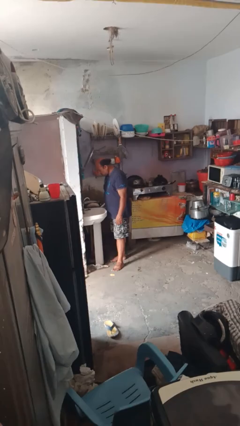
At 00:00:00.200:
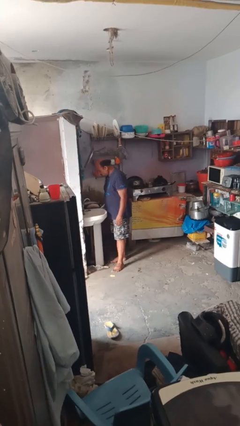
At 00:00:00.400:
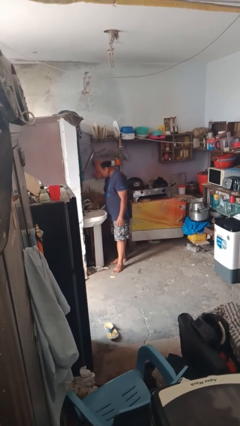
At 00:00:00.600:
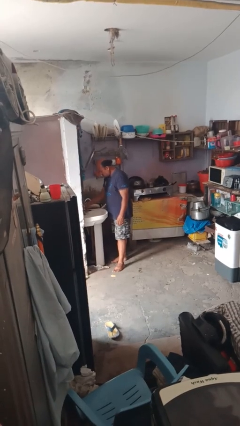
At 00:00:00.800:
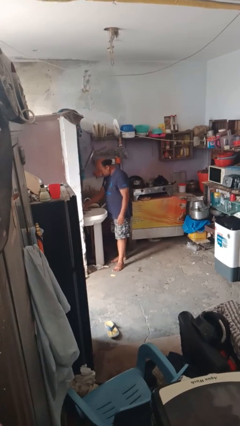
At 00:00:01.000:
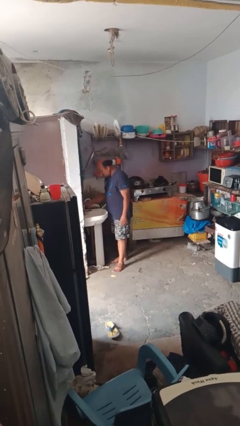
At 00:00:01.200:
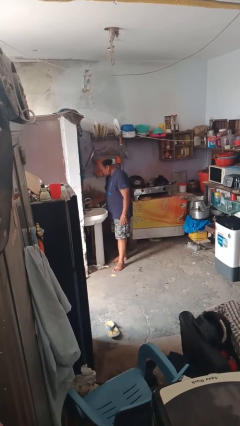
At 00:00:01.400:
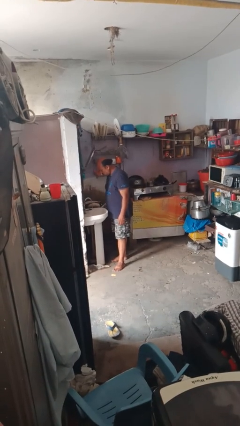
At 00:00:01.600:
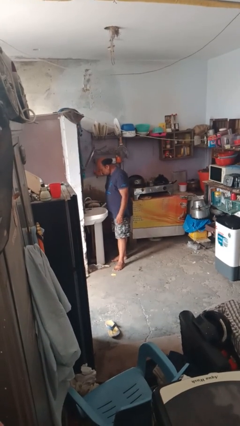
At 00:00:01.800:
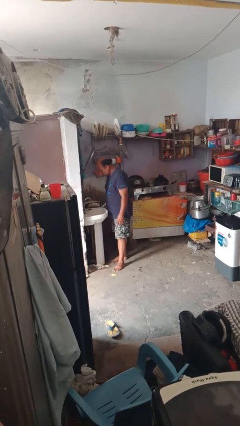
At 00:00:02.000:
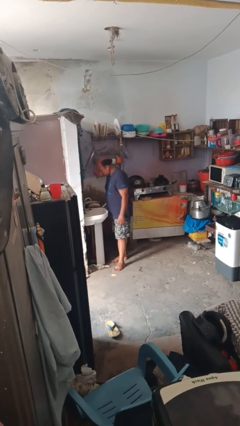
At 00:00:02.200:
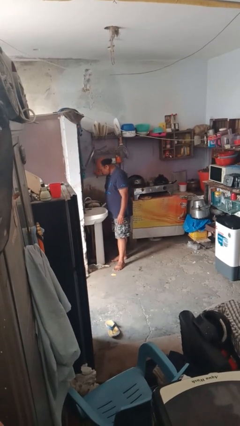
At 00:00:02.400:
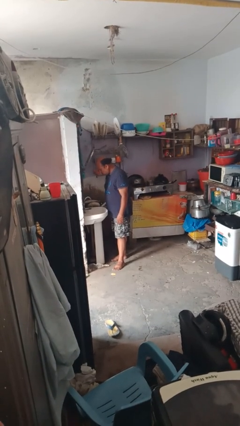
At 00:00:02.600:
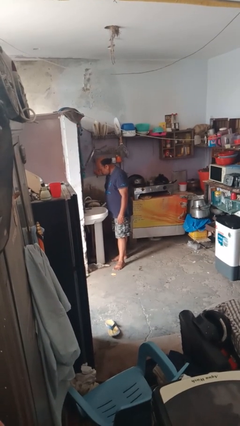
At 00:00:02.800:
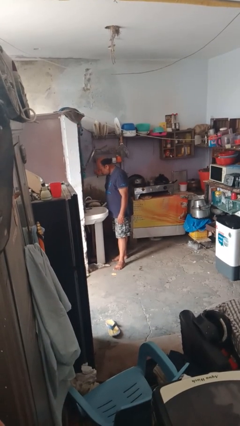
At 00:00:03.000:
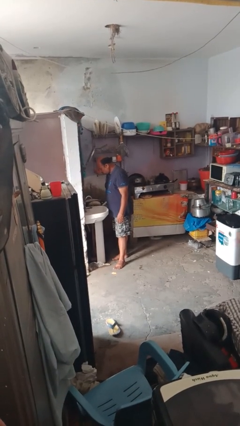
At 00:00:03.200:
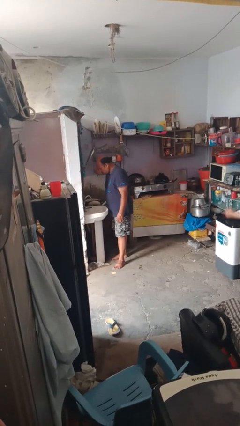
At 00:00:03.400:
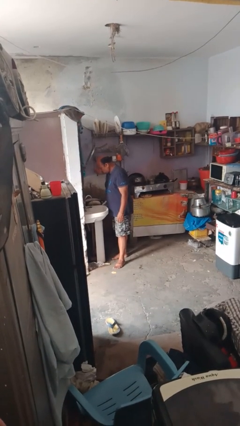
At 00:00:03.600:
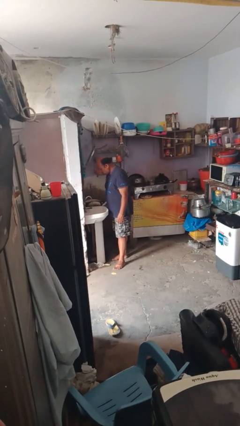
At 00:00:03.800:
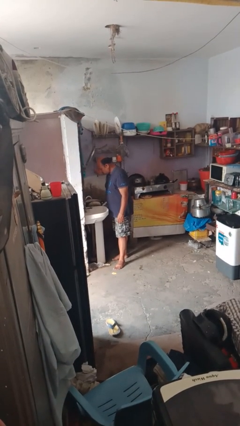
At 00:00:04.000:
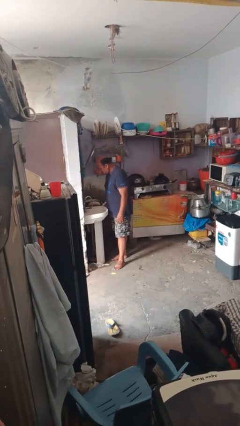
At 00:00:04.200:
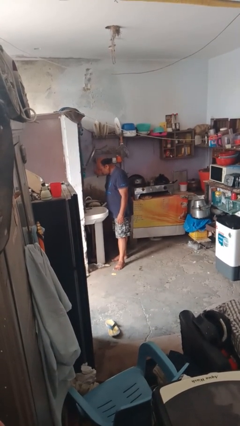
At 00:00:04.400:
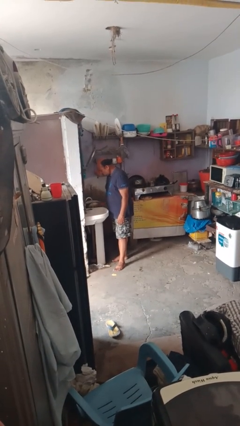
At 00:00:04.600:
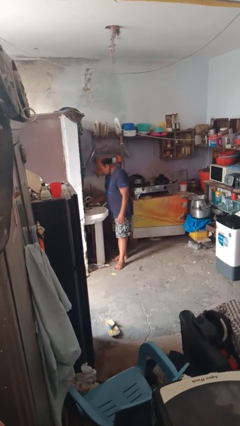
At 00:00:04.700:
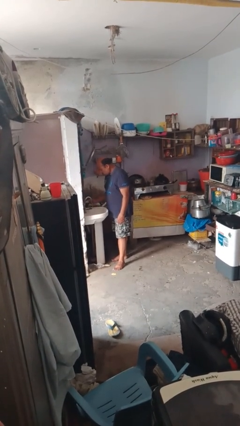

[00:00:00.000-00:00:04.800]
person turns on faucet

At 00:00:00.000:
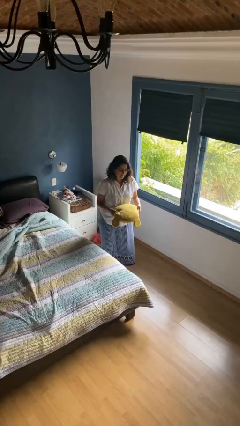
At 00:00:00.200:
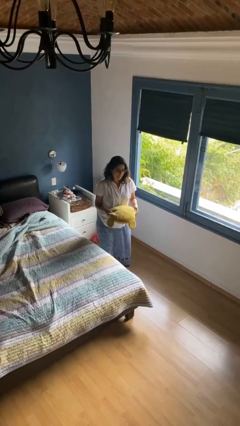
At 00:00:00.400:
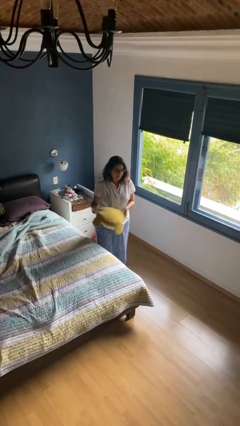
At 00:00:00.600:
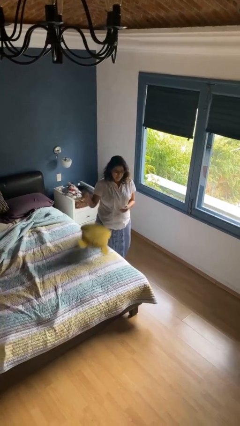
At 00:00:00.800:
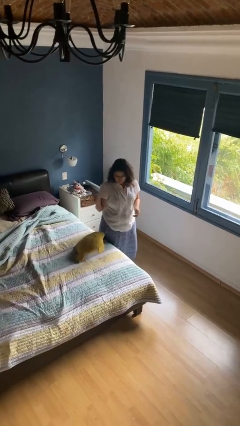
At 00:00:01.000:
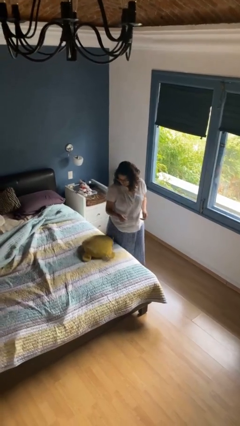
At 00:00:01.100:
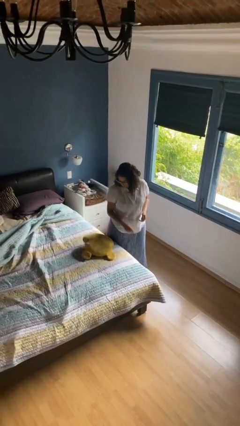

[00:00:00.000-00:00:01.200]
person throws object on bed

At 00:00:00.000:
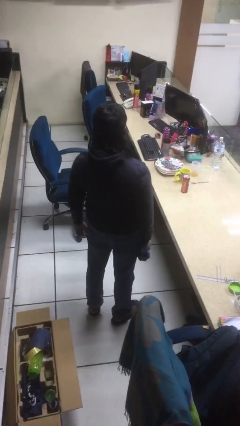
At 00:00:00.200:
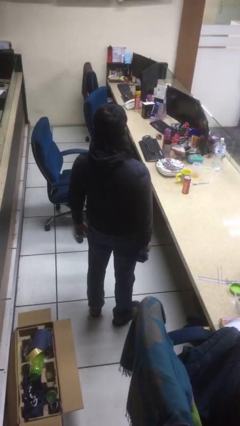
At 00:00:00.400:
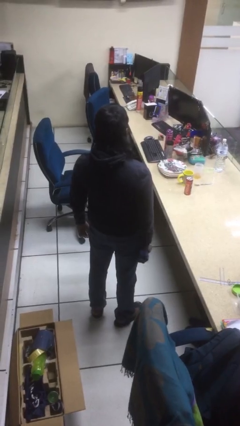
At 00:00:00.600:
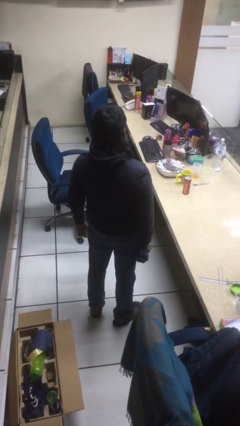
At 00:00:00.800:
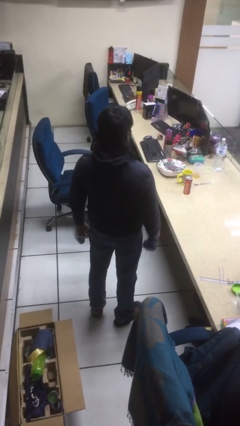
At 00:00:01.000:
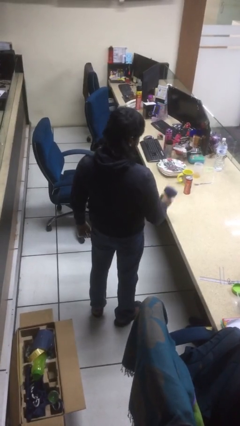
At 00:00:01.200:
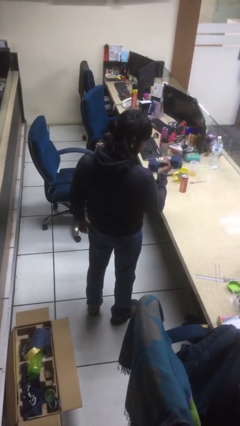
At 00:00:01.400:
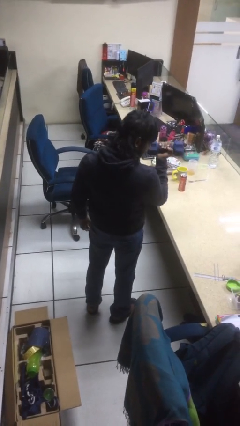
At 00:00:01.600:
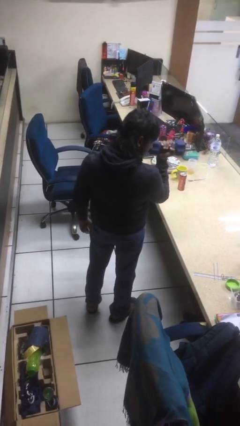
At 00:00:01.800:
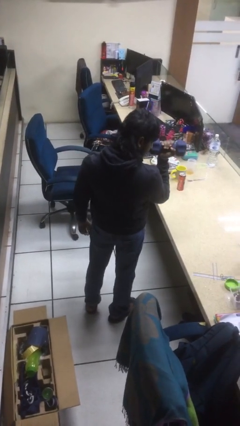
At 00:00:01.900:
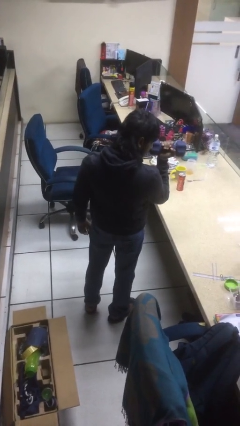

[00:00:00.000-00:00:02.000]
person lifts dumbbells

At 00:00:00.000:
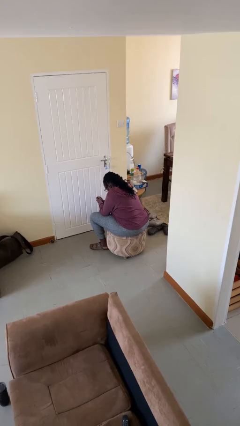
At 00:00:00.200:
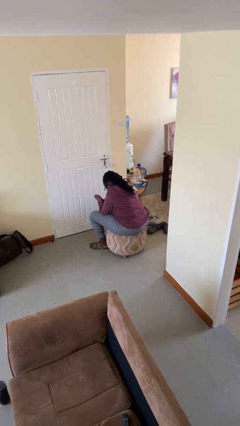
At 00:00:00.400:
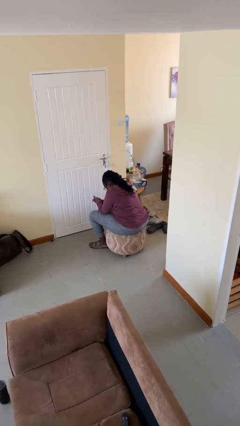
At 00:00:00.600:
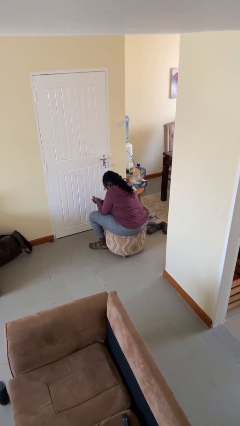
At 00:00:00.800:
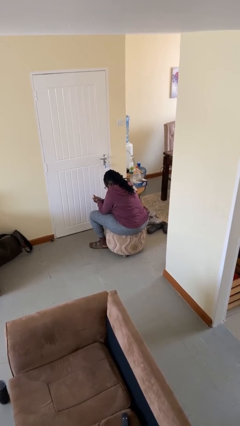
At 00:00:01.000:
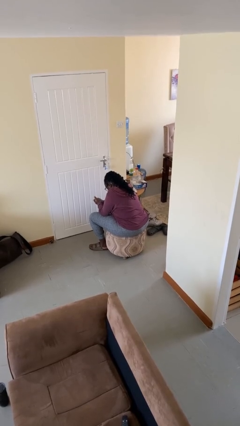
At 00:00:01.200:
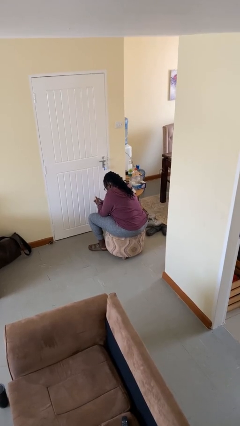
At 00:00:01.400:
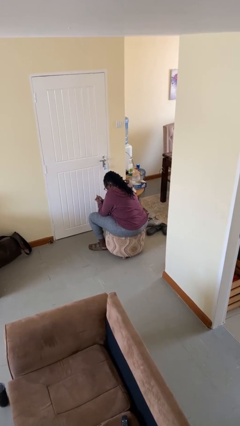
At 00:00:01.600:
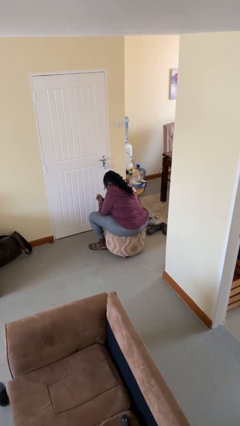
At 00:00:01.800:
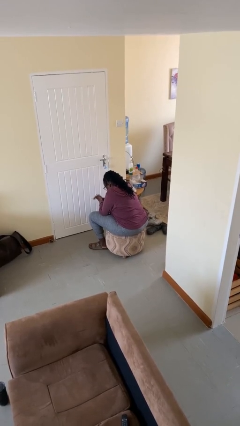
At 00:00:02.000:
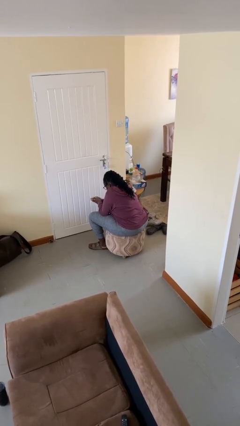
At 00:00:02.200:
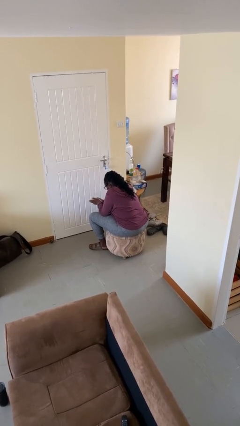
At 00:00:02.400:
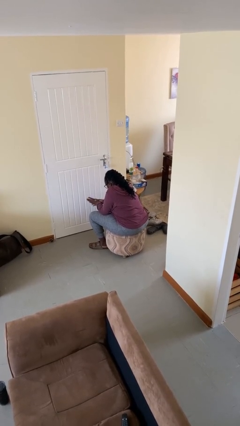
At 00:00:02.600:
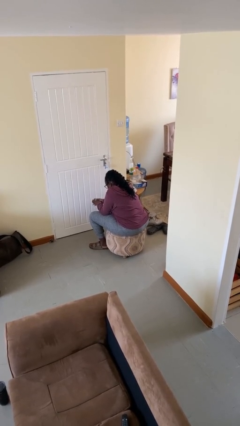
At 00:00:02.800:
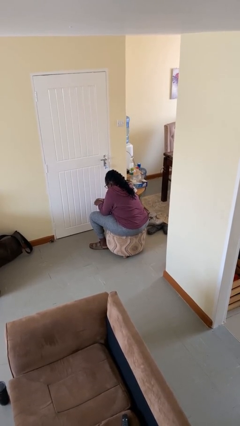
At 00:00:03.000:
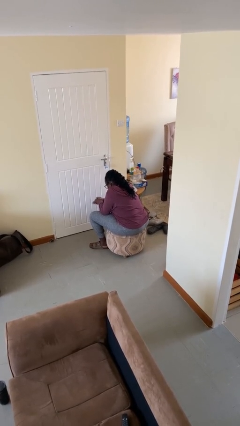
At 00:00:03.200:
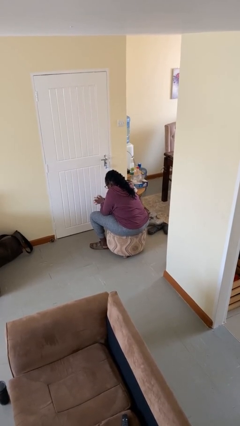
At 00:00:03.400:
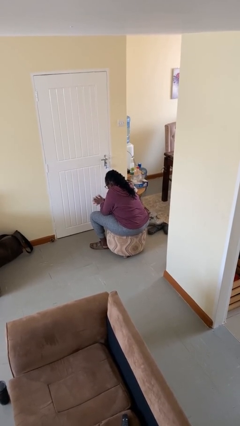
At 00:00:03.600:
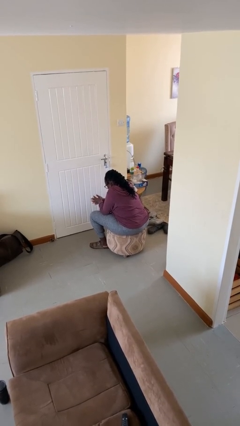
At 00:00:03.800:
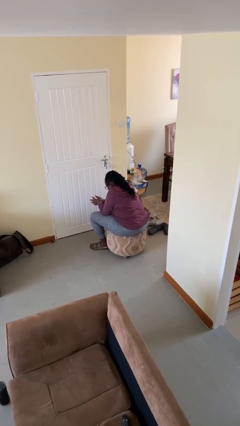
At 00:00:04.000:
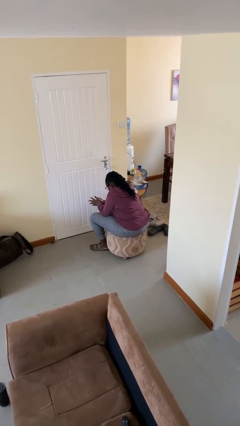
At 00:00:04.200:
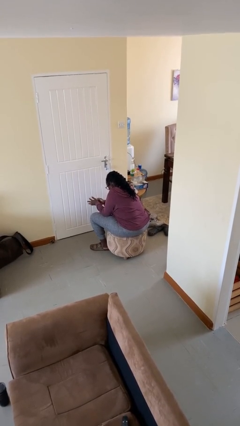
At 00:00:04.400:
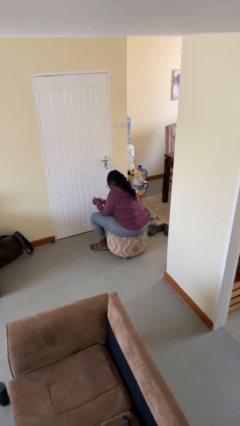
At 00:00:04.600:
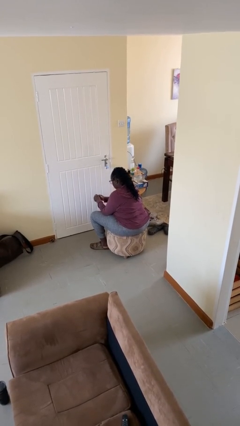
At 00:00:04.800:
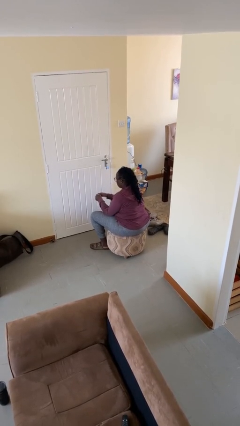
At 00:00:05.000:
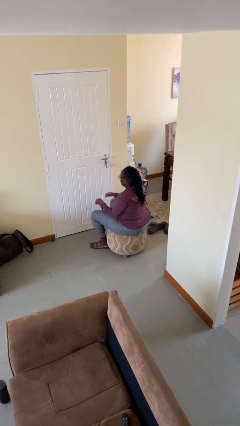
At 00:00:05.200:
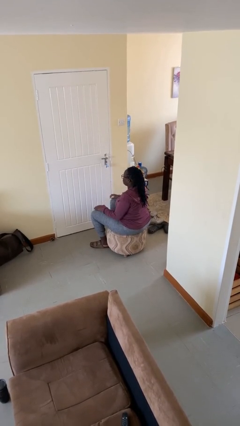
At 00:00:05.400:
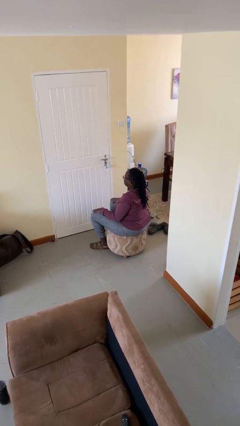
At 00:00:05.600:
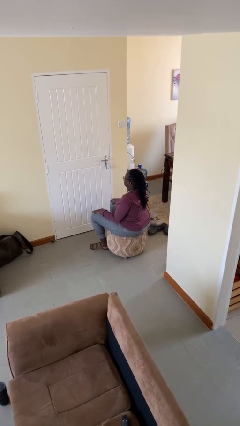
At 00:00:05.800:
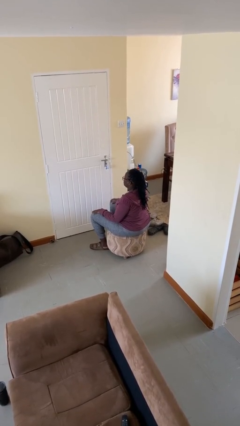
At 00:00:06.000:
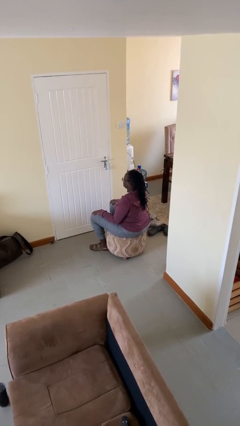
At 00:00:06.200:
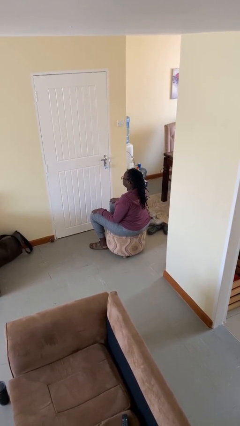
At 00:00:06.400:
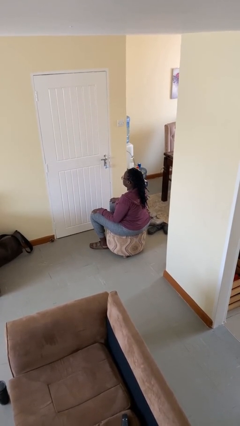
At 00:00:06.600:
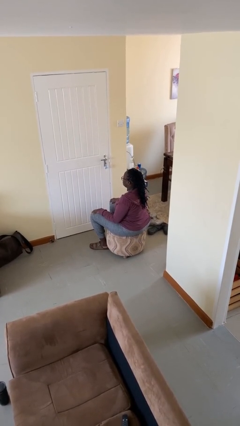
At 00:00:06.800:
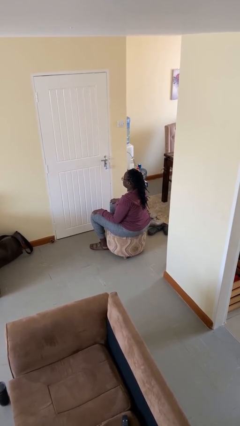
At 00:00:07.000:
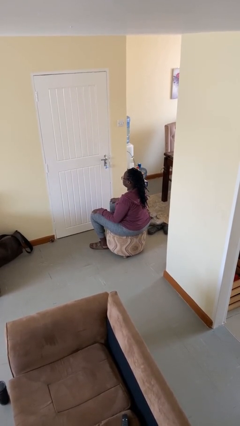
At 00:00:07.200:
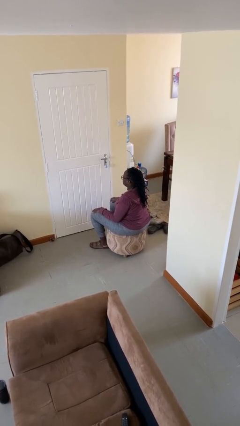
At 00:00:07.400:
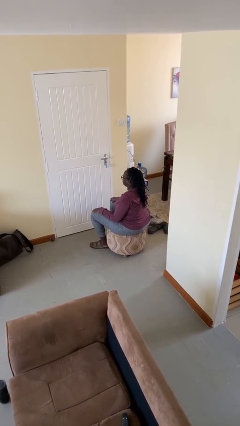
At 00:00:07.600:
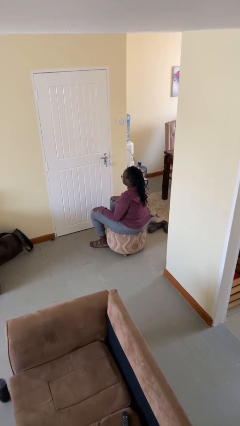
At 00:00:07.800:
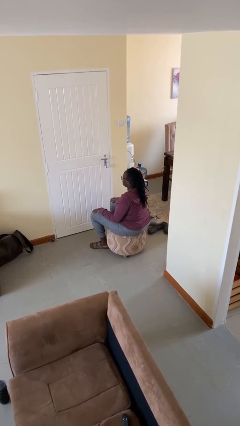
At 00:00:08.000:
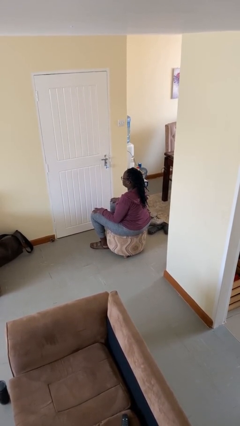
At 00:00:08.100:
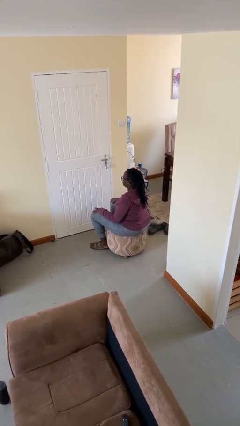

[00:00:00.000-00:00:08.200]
person looks at hands in lap

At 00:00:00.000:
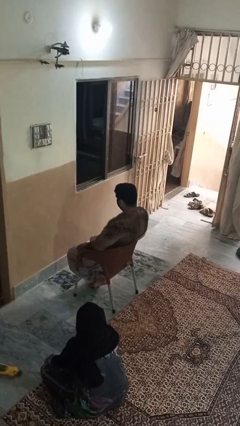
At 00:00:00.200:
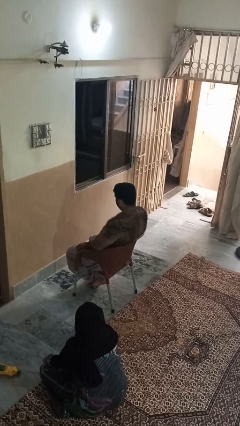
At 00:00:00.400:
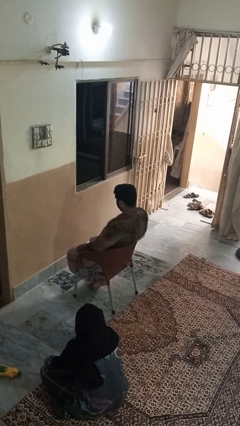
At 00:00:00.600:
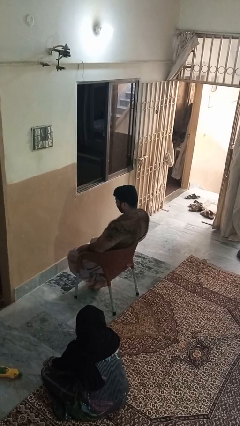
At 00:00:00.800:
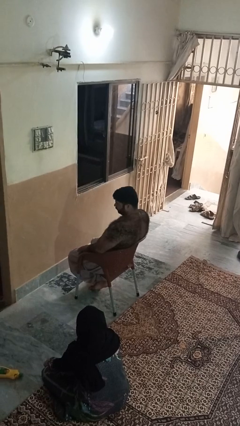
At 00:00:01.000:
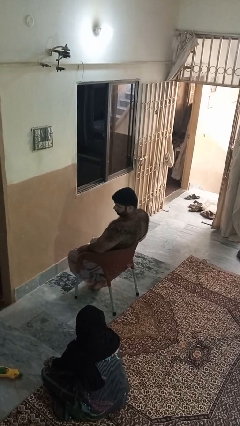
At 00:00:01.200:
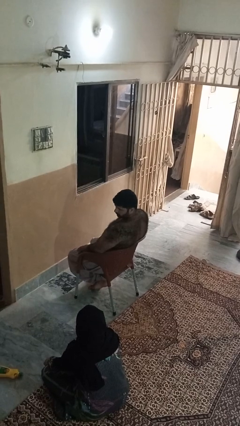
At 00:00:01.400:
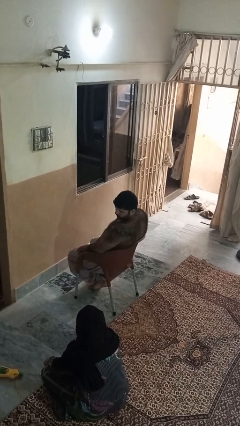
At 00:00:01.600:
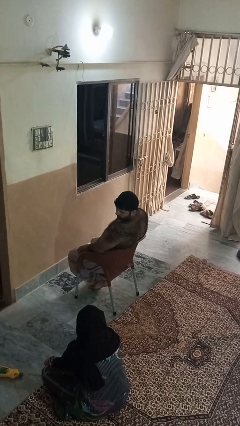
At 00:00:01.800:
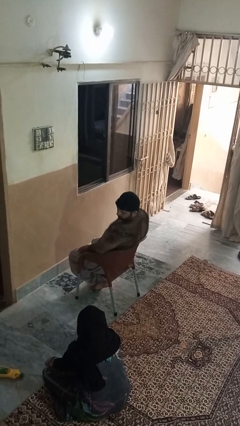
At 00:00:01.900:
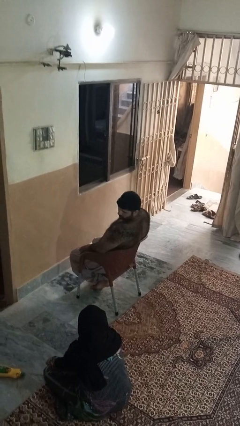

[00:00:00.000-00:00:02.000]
person looks over shoulder
